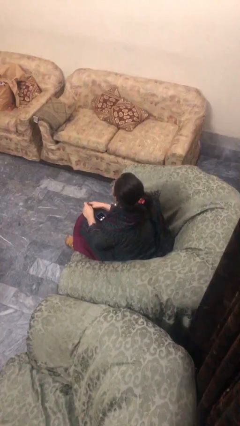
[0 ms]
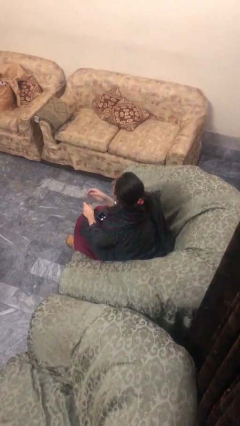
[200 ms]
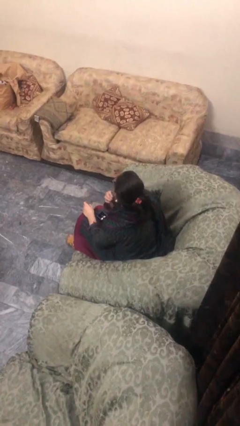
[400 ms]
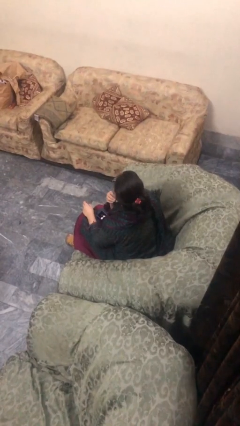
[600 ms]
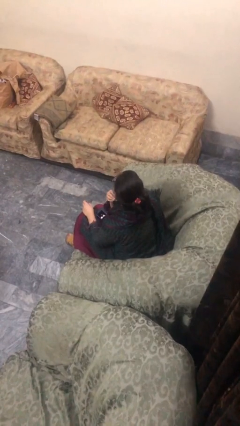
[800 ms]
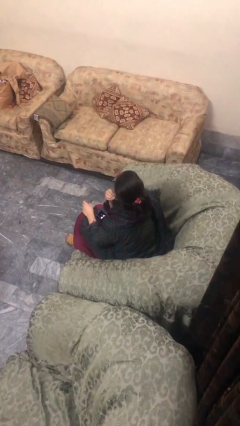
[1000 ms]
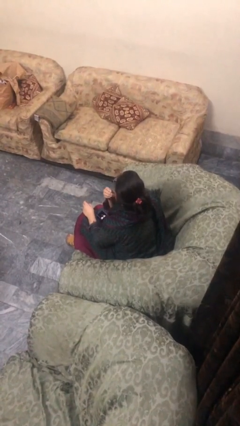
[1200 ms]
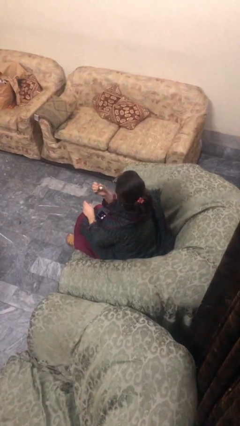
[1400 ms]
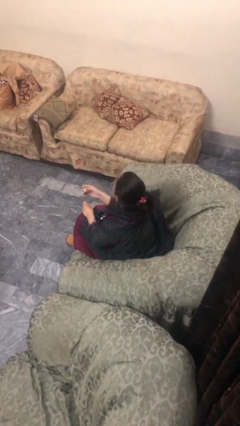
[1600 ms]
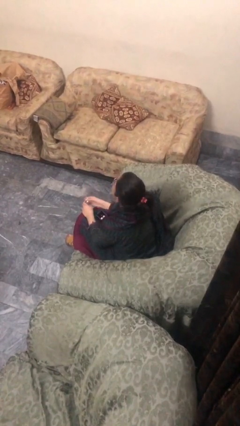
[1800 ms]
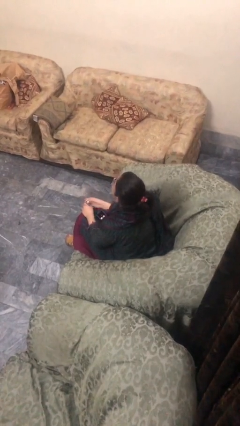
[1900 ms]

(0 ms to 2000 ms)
person takes off earrings

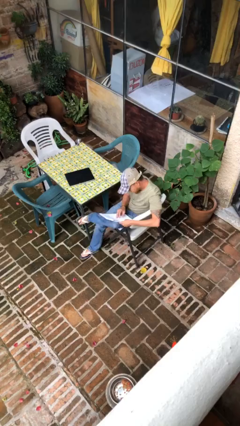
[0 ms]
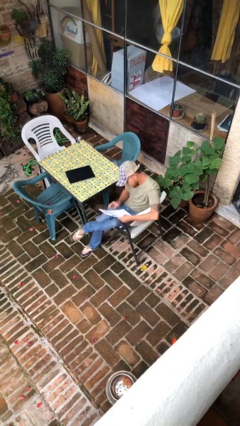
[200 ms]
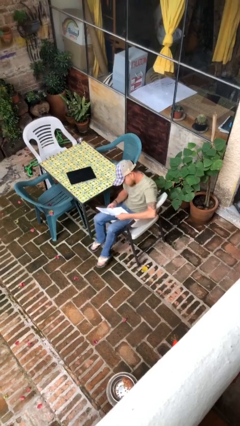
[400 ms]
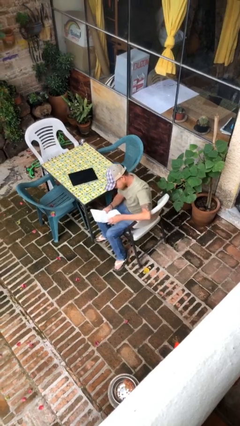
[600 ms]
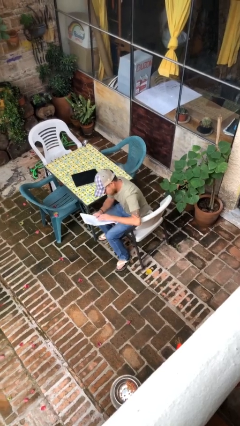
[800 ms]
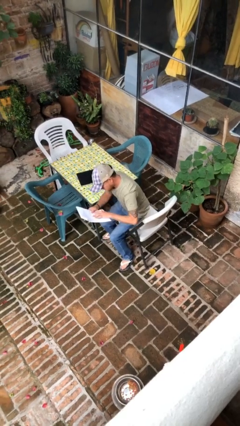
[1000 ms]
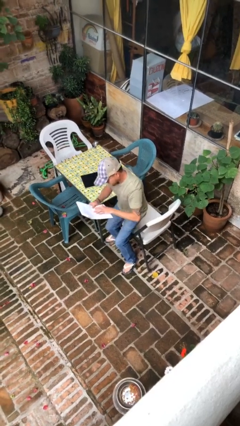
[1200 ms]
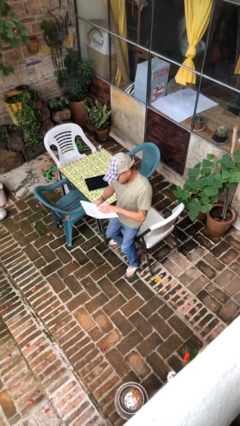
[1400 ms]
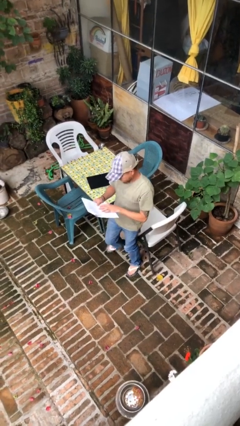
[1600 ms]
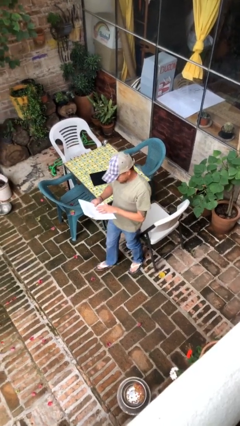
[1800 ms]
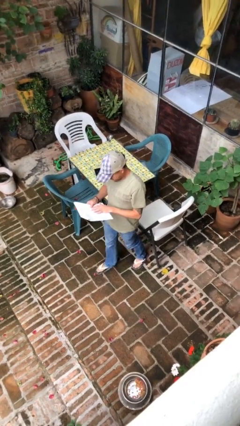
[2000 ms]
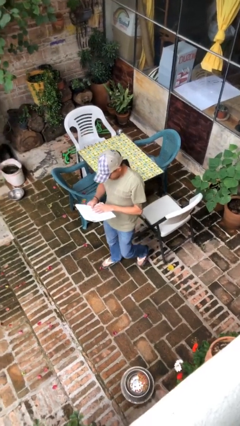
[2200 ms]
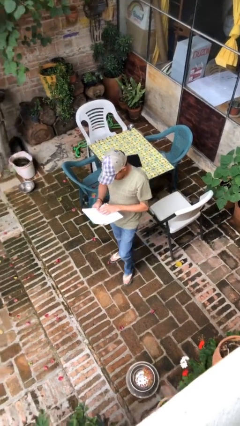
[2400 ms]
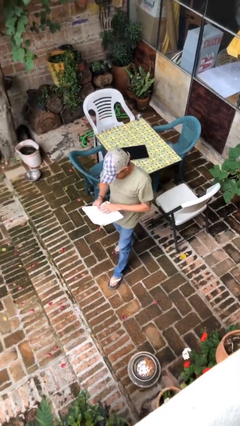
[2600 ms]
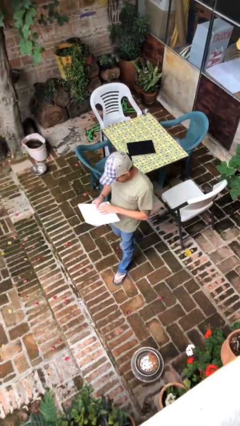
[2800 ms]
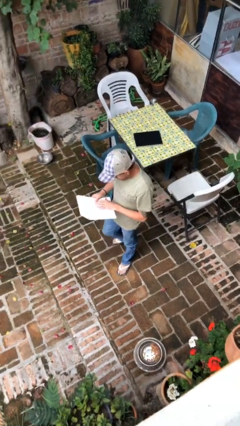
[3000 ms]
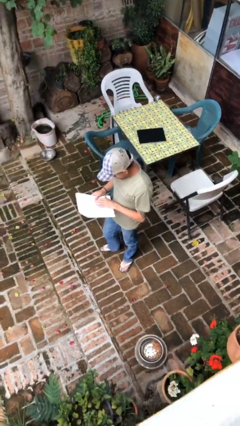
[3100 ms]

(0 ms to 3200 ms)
person stands up

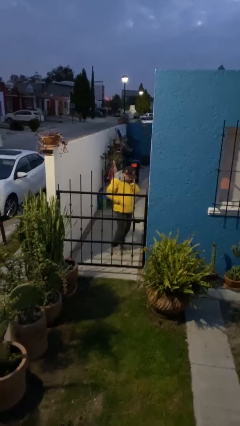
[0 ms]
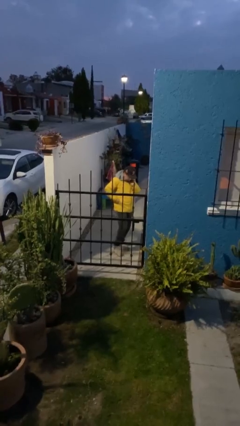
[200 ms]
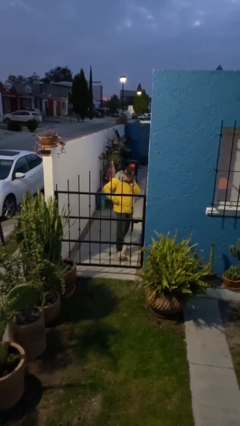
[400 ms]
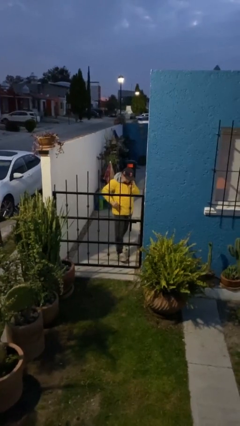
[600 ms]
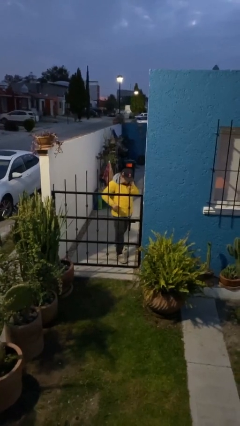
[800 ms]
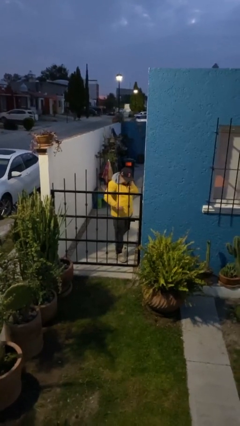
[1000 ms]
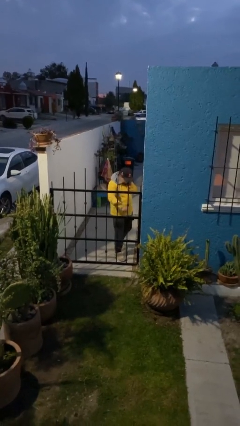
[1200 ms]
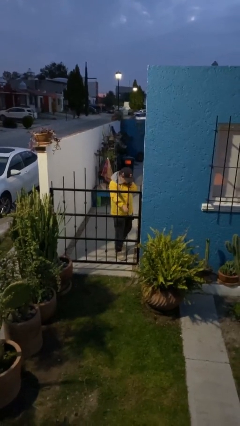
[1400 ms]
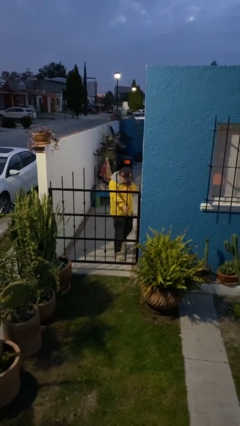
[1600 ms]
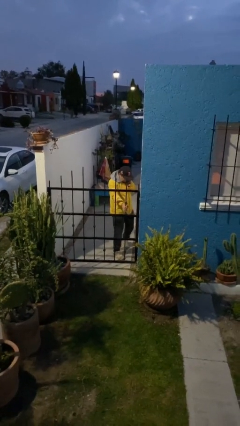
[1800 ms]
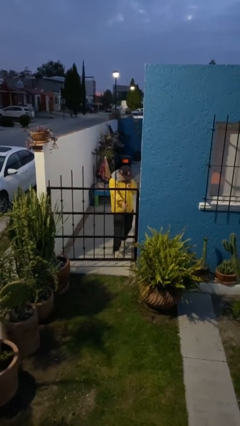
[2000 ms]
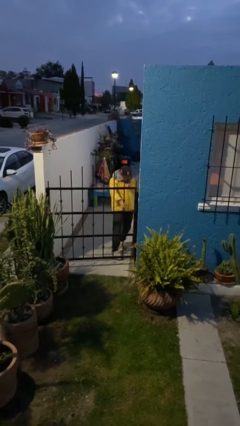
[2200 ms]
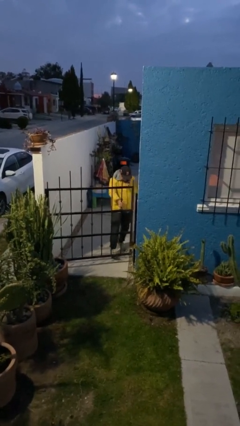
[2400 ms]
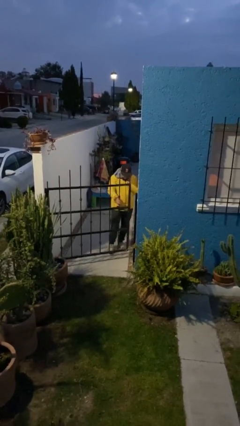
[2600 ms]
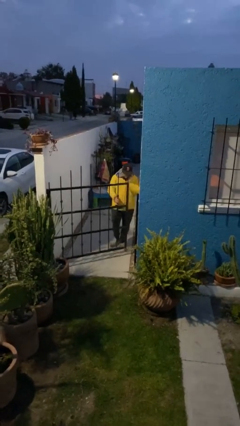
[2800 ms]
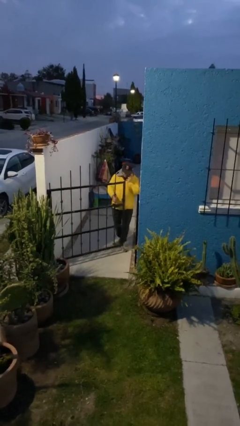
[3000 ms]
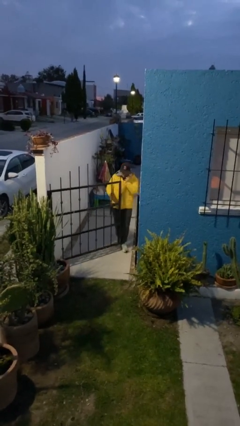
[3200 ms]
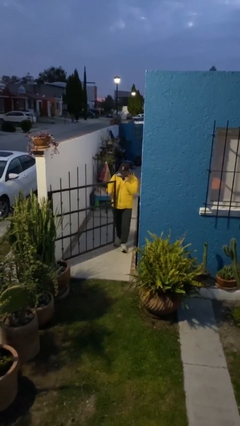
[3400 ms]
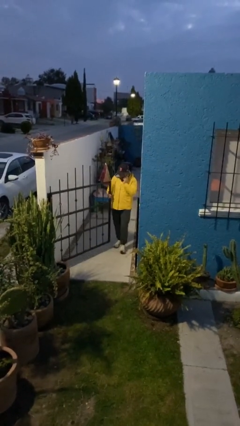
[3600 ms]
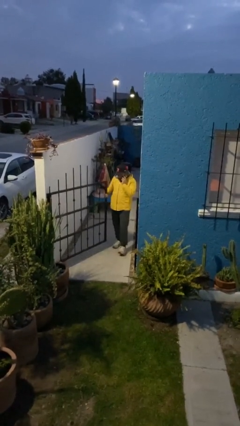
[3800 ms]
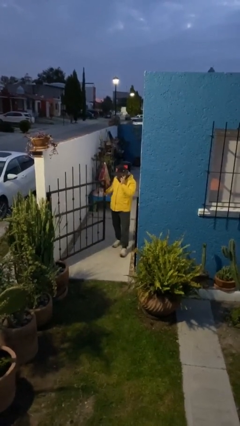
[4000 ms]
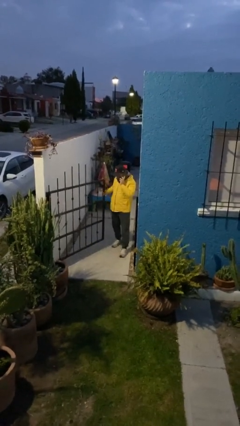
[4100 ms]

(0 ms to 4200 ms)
person opens facility door

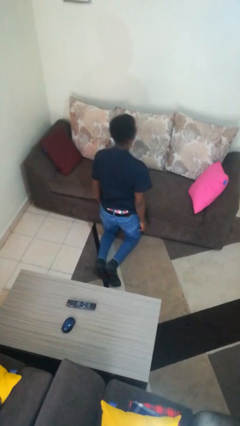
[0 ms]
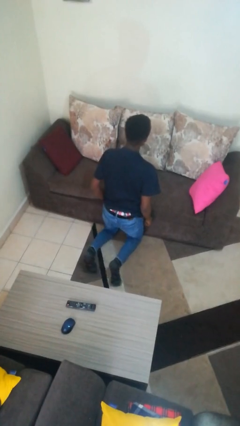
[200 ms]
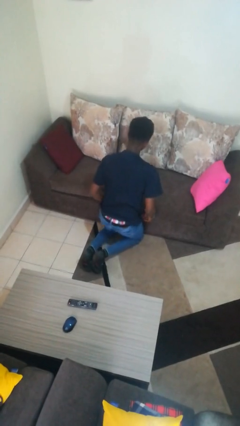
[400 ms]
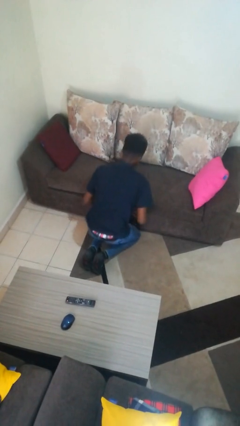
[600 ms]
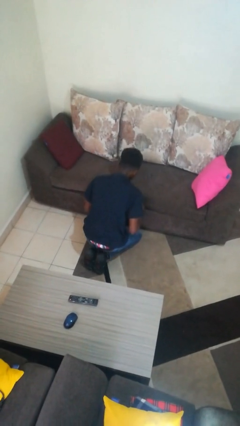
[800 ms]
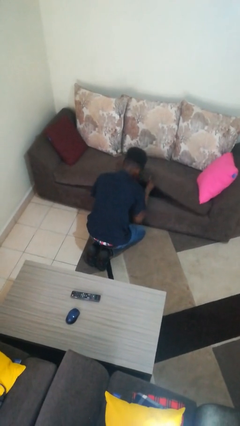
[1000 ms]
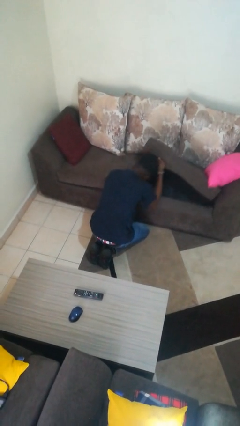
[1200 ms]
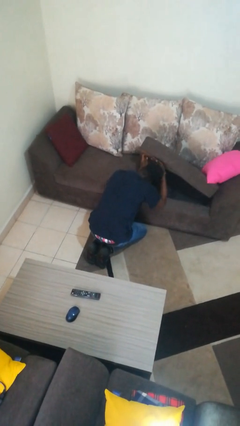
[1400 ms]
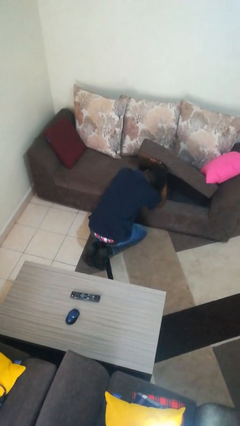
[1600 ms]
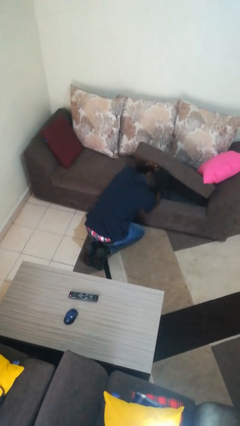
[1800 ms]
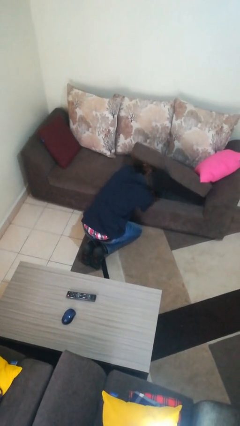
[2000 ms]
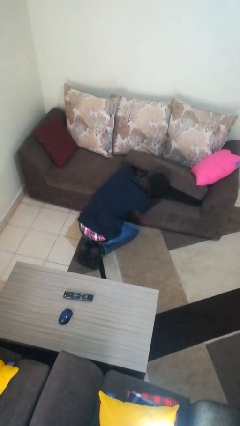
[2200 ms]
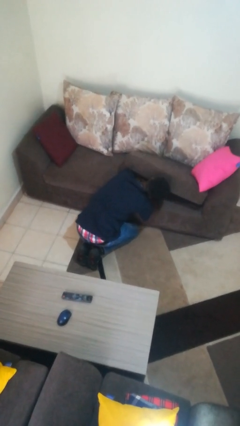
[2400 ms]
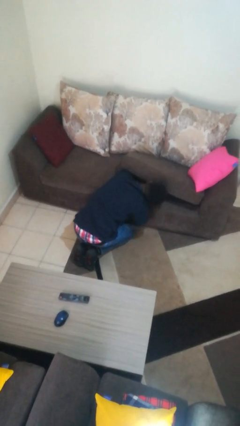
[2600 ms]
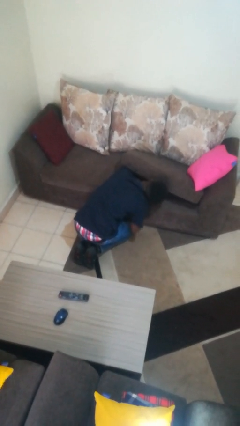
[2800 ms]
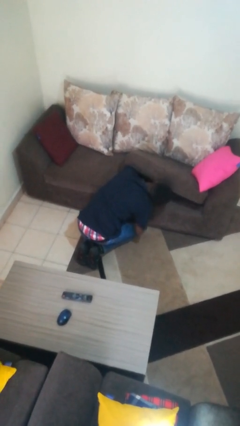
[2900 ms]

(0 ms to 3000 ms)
person searches under couch

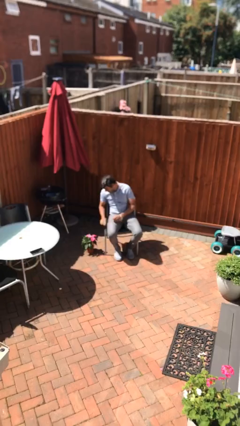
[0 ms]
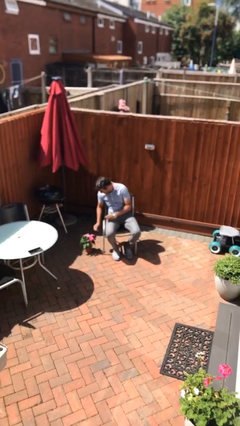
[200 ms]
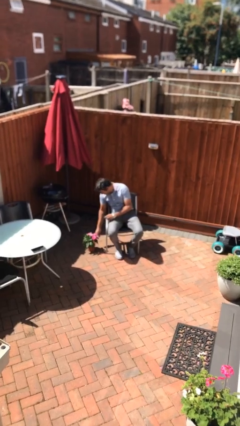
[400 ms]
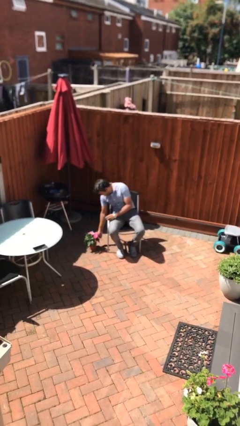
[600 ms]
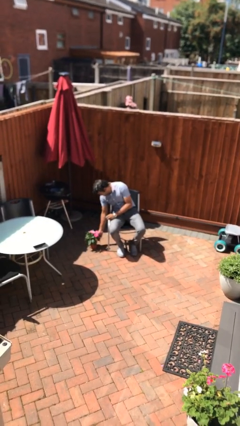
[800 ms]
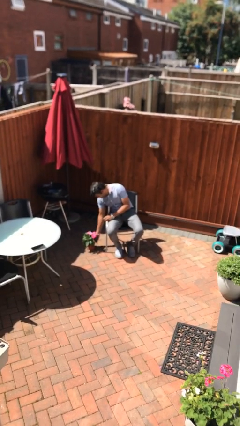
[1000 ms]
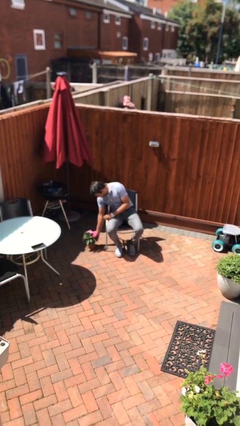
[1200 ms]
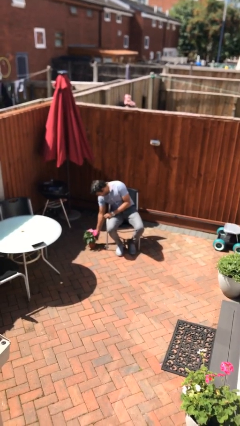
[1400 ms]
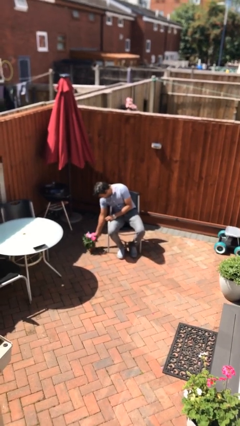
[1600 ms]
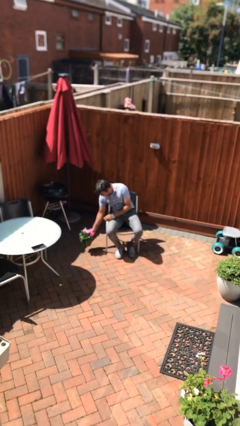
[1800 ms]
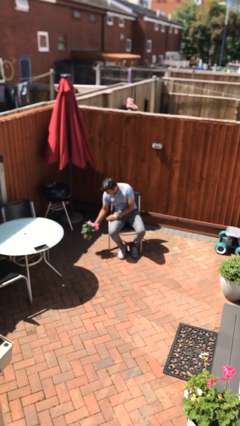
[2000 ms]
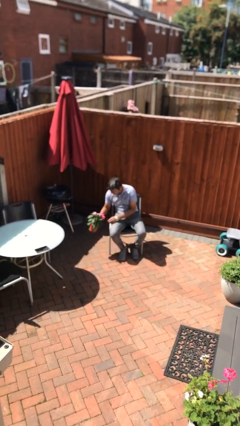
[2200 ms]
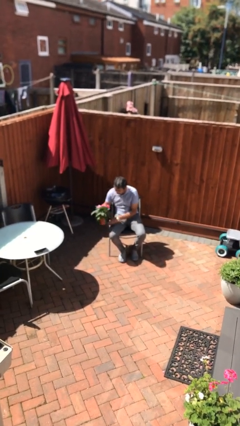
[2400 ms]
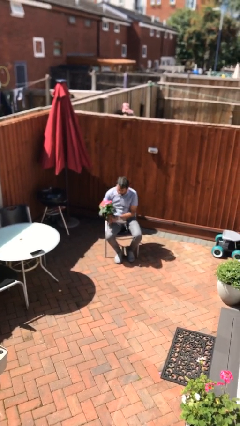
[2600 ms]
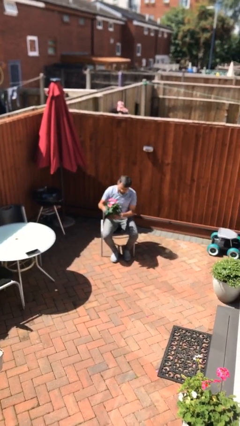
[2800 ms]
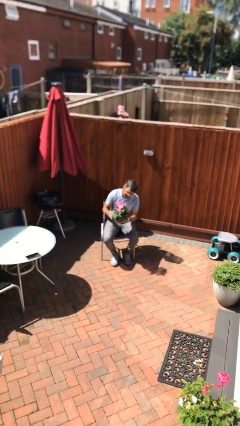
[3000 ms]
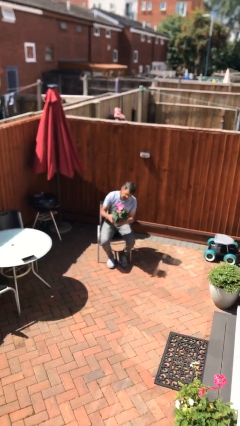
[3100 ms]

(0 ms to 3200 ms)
person picks up object from floor

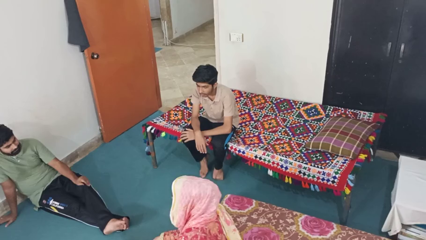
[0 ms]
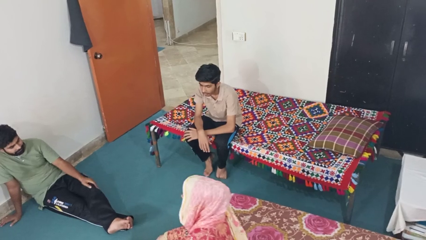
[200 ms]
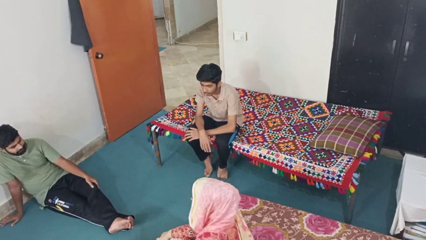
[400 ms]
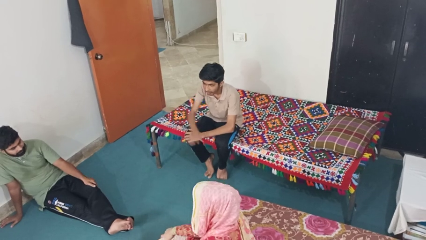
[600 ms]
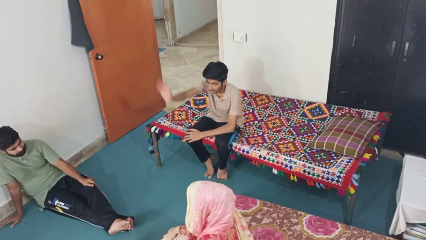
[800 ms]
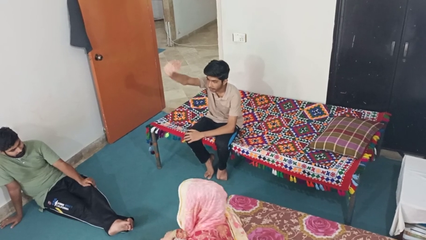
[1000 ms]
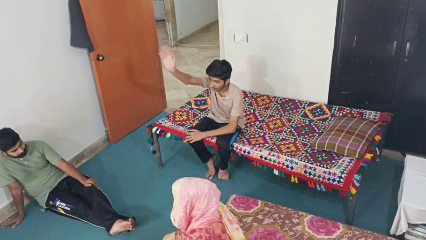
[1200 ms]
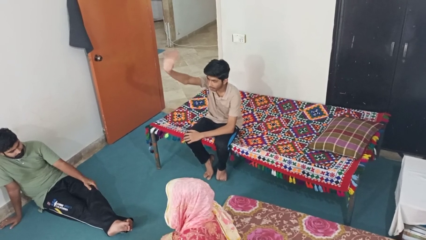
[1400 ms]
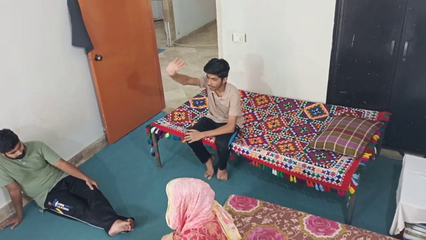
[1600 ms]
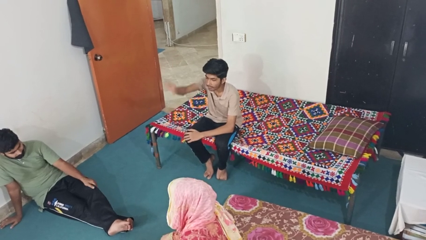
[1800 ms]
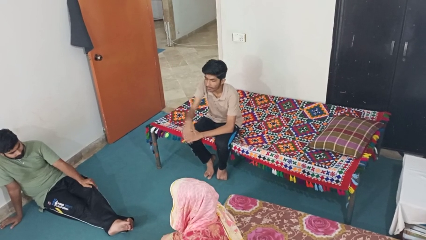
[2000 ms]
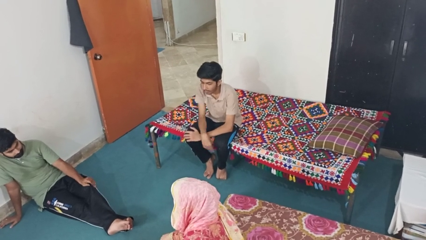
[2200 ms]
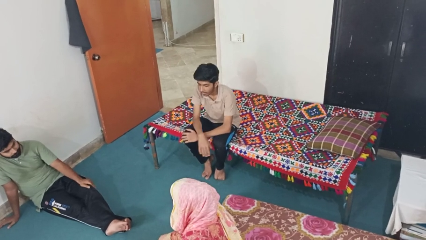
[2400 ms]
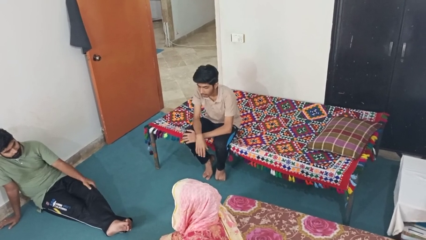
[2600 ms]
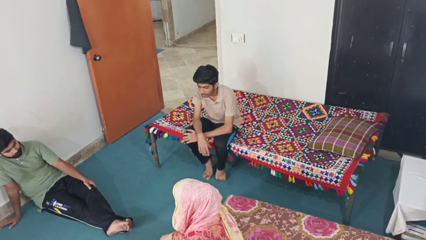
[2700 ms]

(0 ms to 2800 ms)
person waves at person
